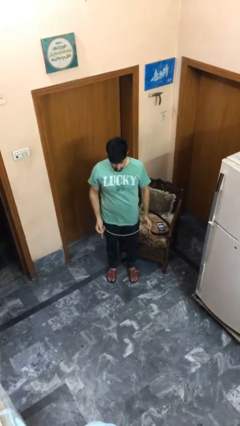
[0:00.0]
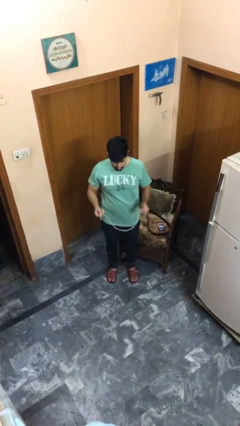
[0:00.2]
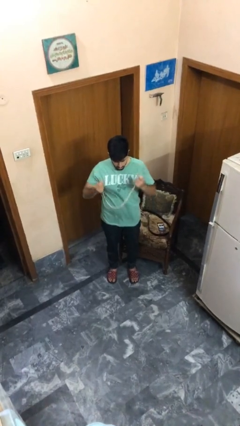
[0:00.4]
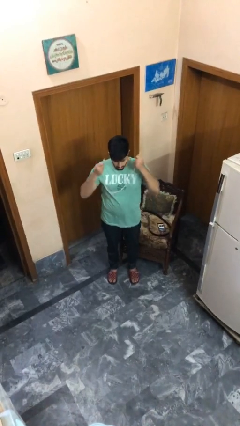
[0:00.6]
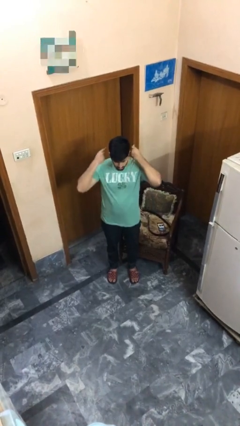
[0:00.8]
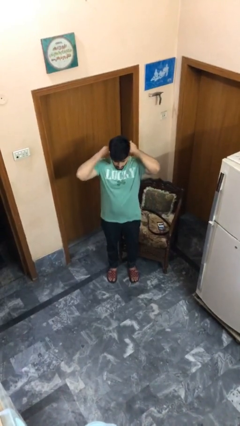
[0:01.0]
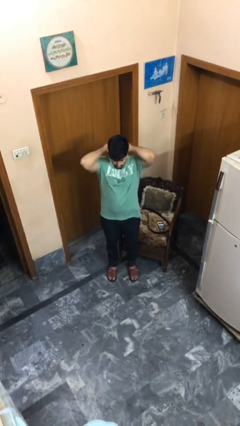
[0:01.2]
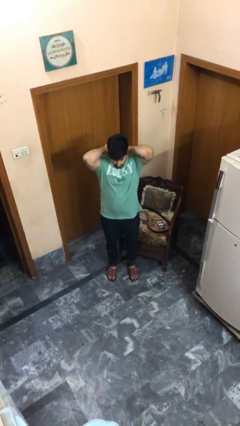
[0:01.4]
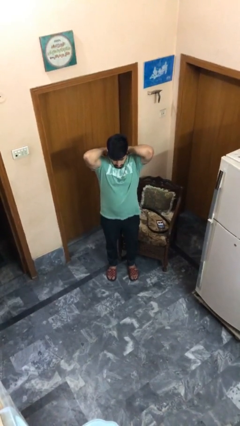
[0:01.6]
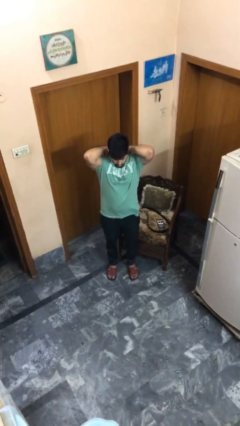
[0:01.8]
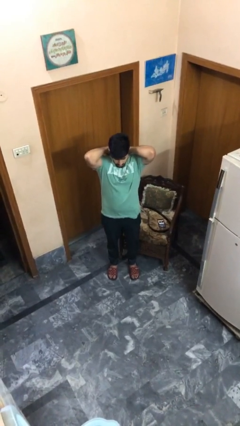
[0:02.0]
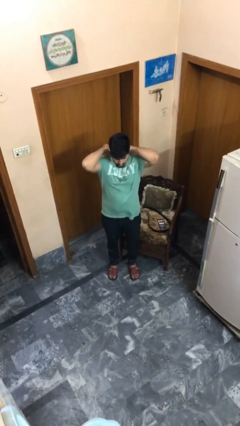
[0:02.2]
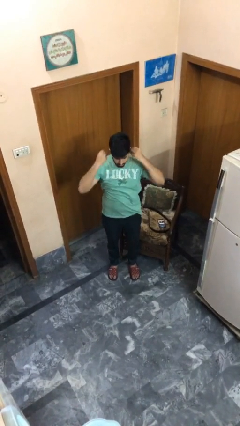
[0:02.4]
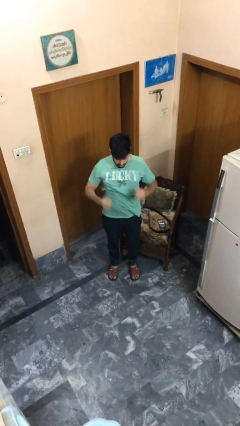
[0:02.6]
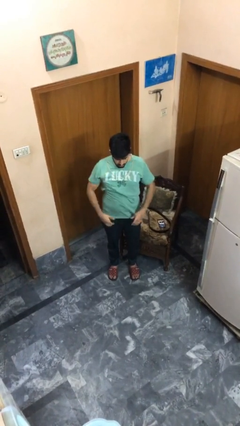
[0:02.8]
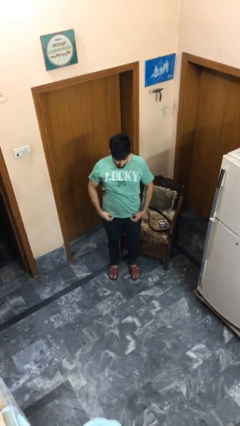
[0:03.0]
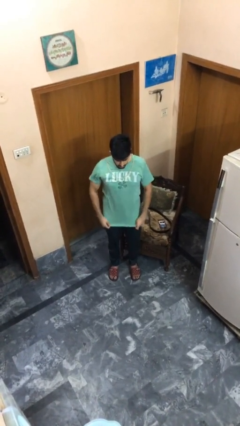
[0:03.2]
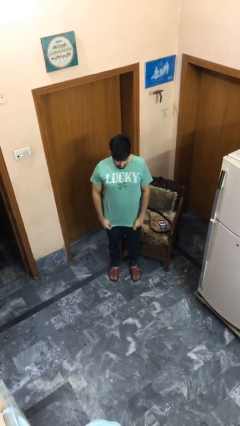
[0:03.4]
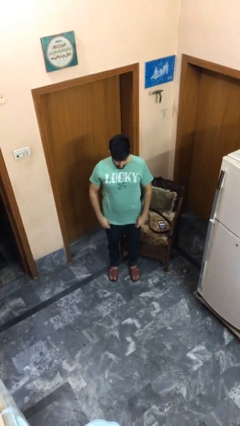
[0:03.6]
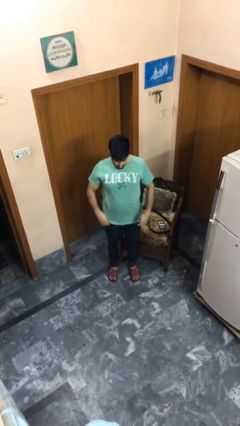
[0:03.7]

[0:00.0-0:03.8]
person puts on necklace

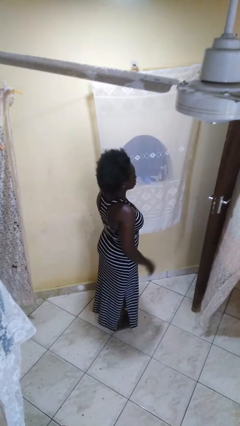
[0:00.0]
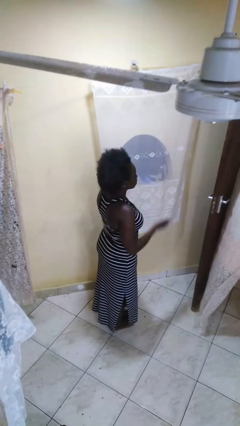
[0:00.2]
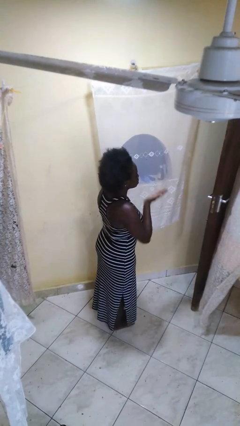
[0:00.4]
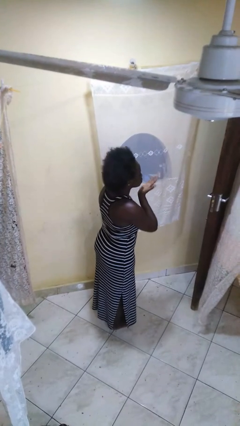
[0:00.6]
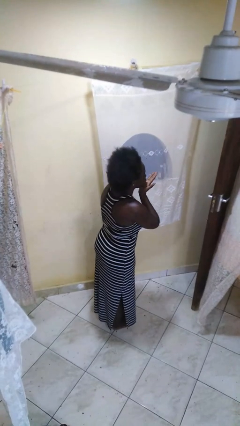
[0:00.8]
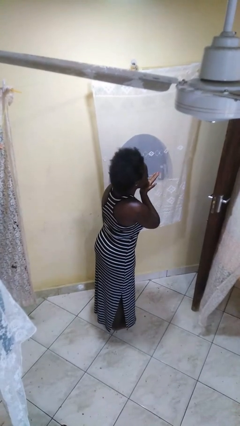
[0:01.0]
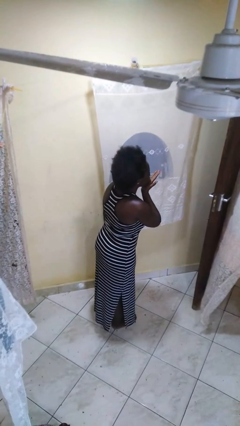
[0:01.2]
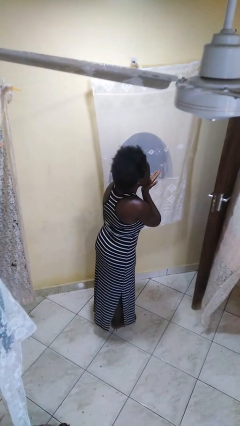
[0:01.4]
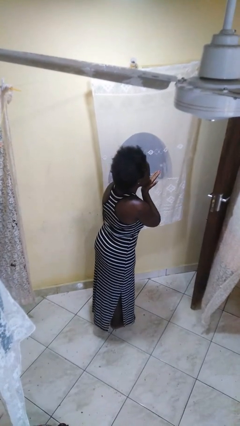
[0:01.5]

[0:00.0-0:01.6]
person gestures blow kiss

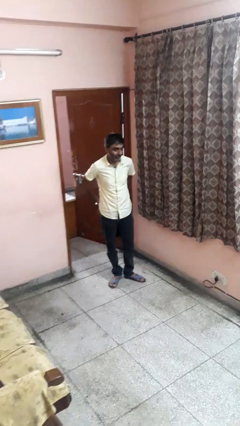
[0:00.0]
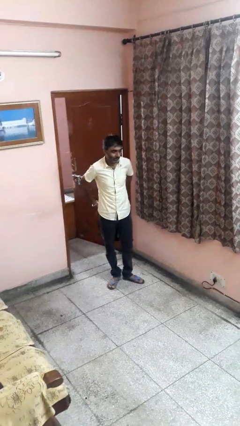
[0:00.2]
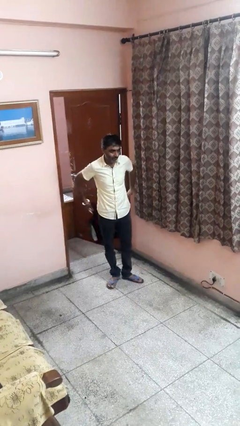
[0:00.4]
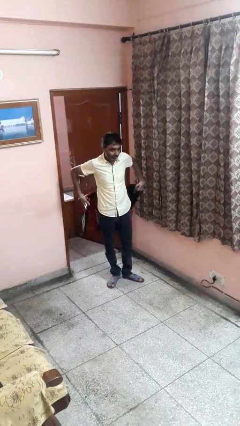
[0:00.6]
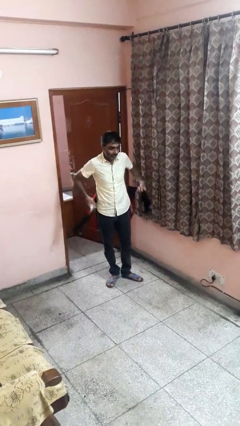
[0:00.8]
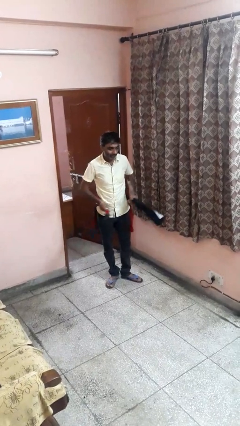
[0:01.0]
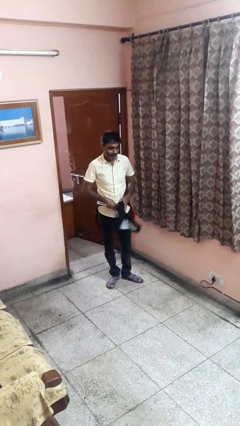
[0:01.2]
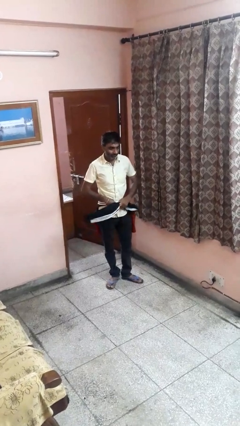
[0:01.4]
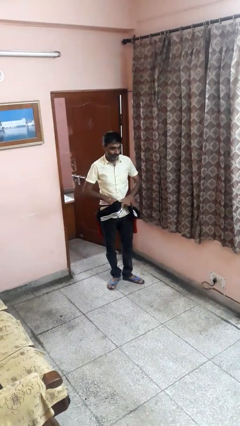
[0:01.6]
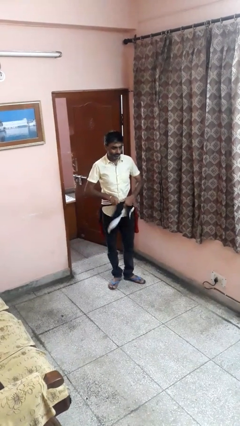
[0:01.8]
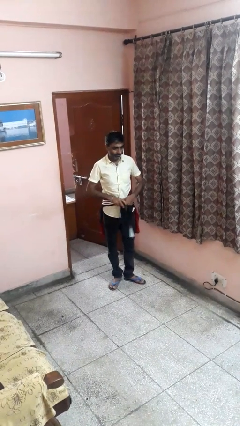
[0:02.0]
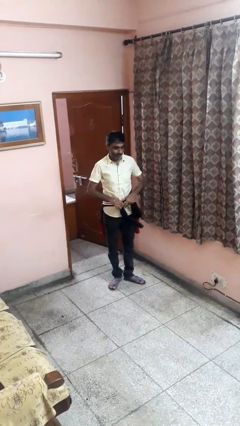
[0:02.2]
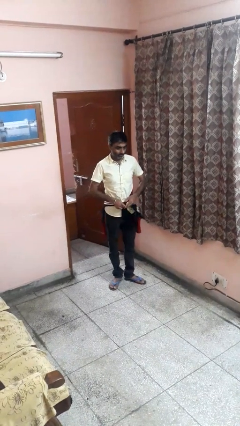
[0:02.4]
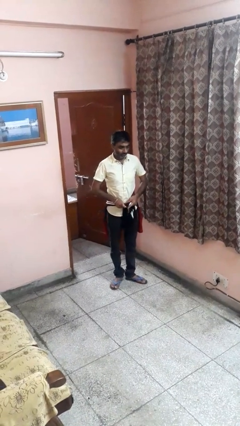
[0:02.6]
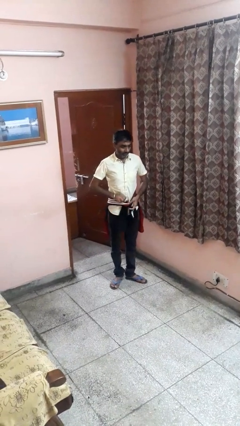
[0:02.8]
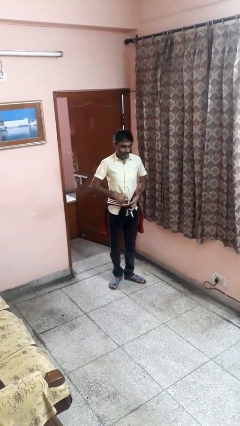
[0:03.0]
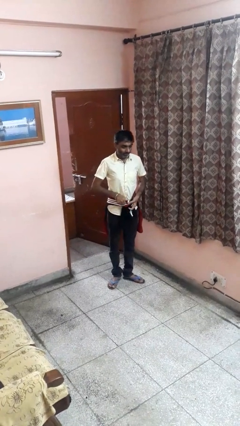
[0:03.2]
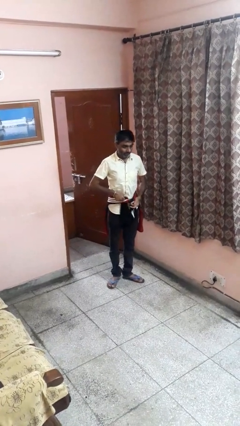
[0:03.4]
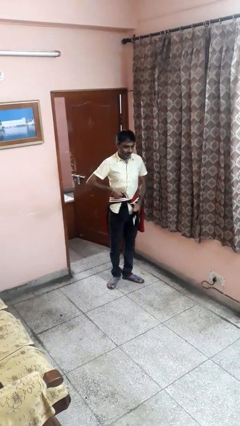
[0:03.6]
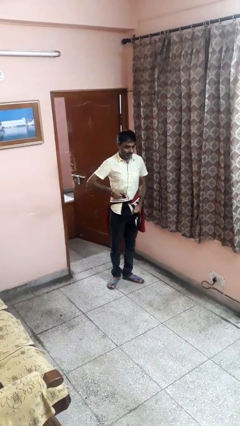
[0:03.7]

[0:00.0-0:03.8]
person ties jacket around waist

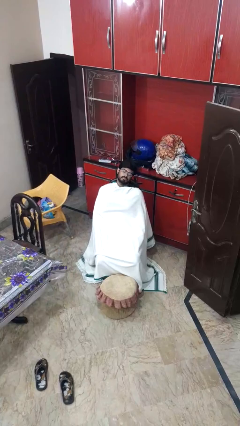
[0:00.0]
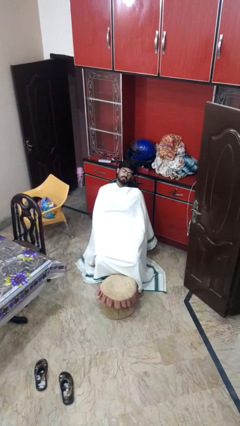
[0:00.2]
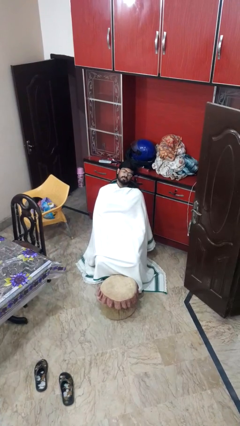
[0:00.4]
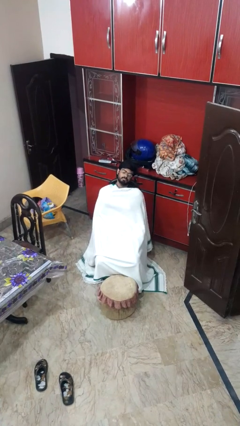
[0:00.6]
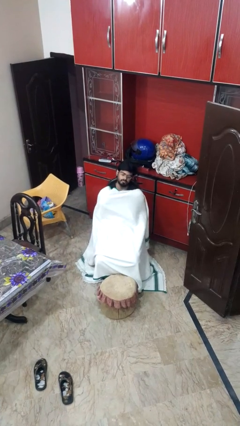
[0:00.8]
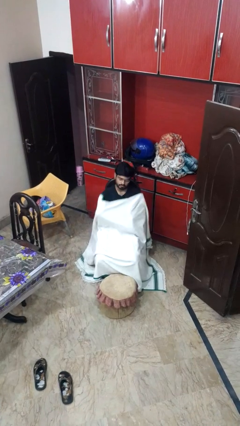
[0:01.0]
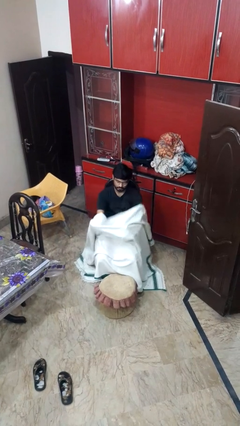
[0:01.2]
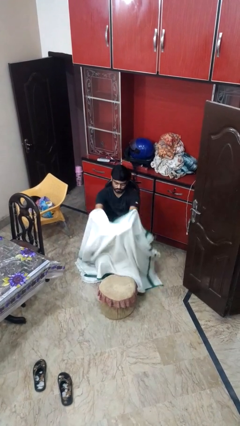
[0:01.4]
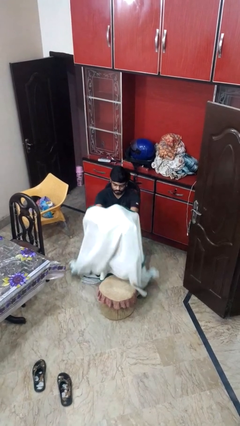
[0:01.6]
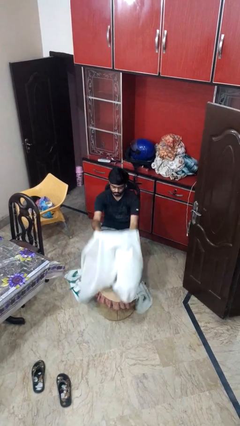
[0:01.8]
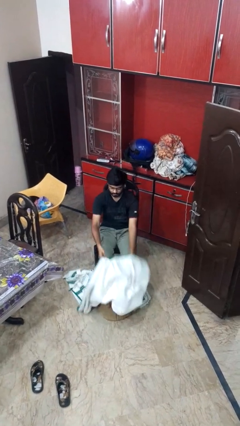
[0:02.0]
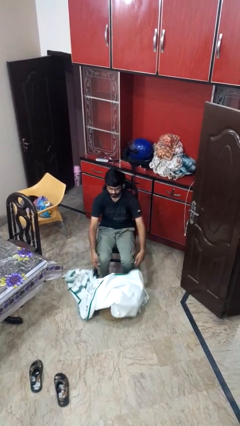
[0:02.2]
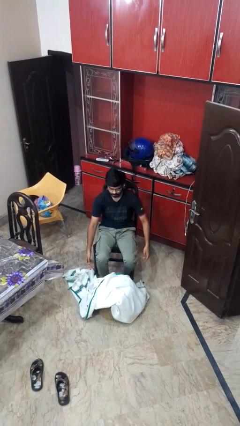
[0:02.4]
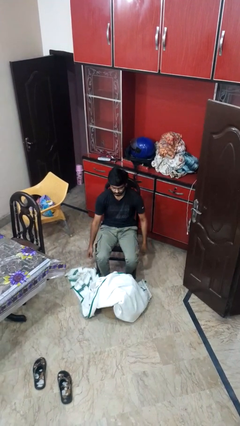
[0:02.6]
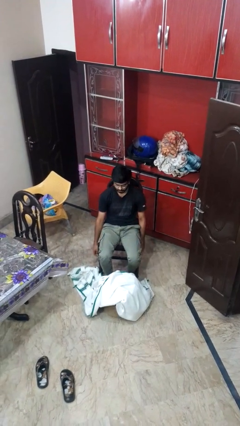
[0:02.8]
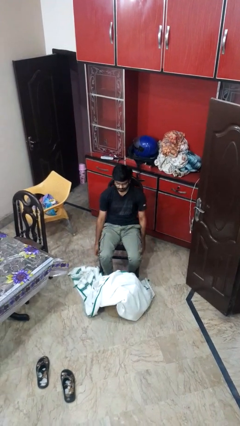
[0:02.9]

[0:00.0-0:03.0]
person uncovers with blanket

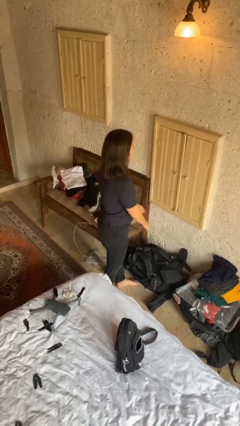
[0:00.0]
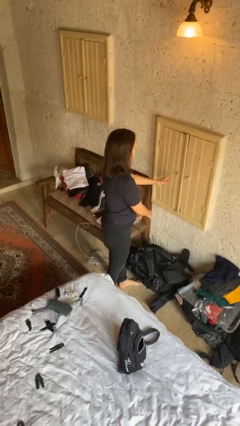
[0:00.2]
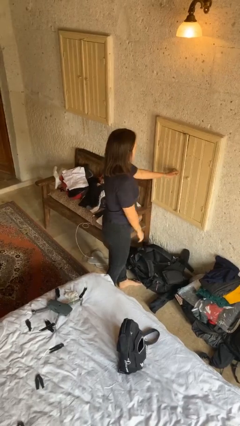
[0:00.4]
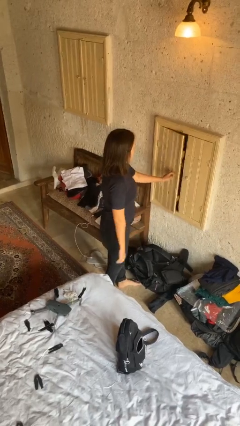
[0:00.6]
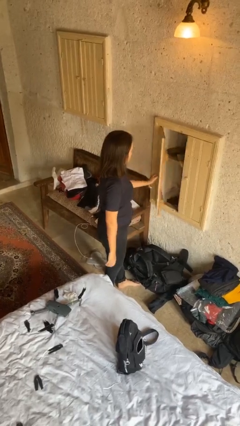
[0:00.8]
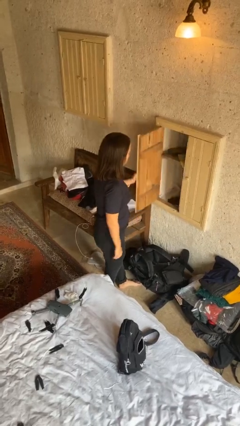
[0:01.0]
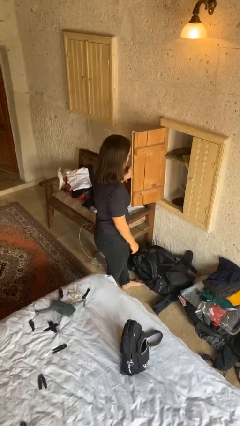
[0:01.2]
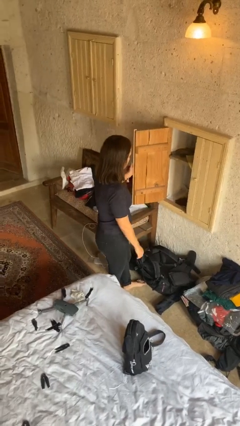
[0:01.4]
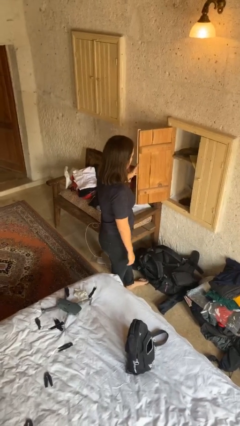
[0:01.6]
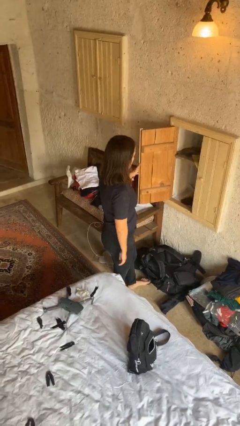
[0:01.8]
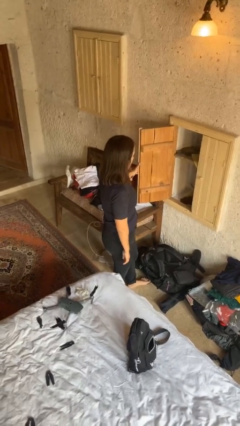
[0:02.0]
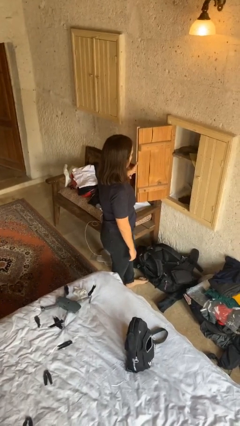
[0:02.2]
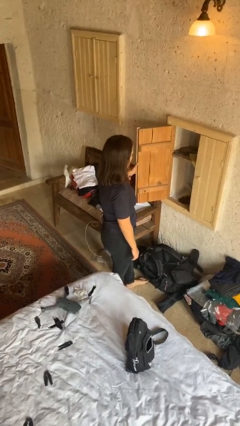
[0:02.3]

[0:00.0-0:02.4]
person opens closet door

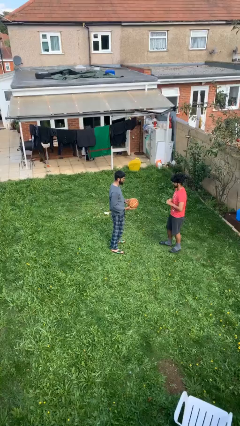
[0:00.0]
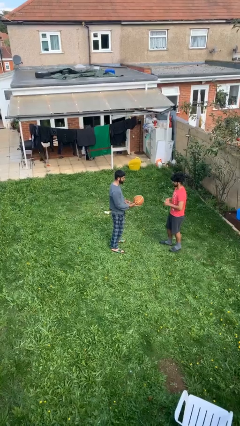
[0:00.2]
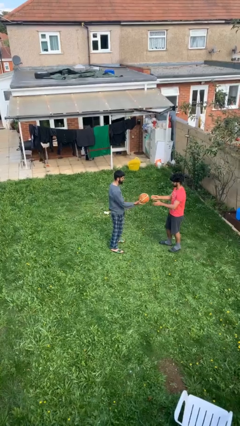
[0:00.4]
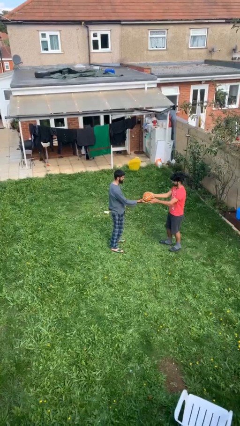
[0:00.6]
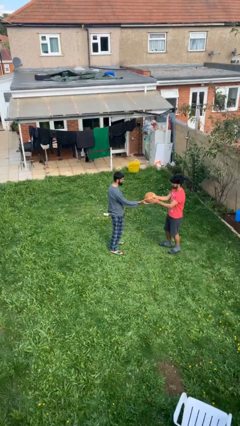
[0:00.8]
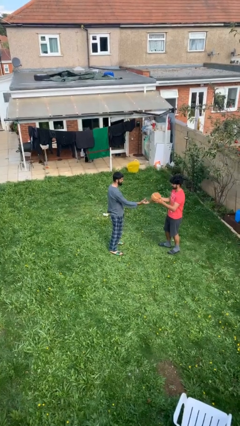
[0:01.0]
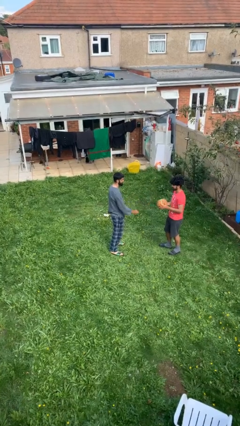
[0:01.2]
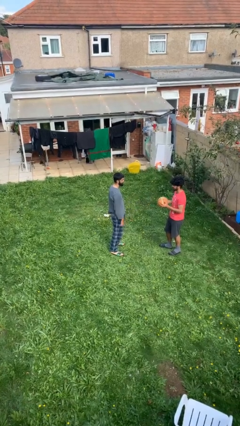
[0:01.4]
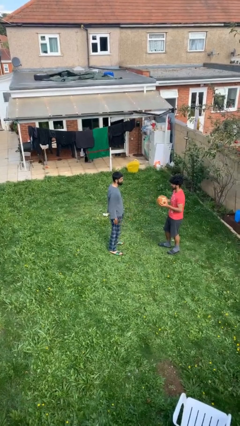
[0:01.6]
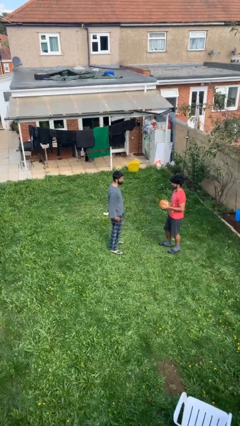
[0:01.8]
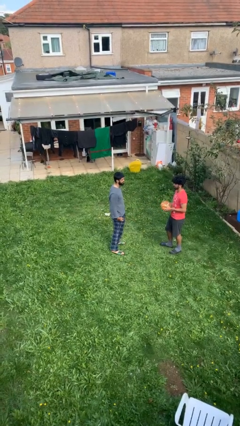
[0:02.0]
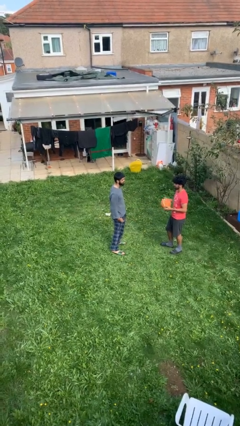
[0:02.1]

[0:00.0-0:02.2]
person transfers object to person

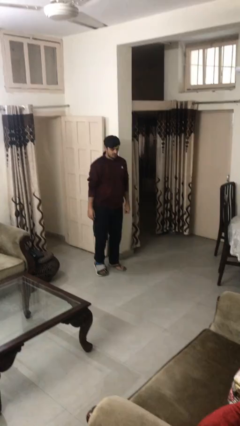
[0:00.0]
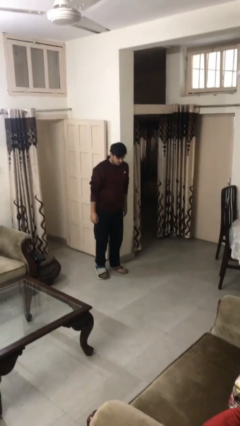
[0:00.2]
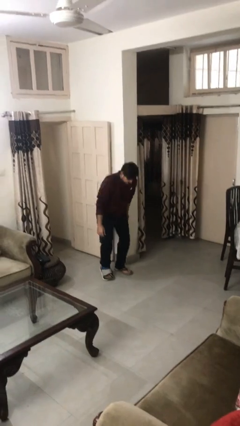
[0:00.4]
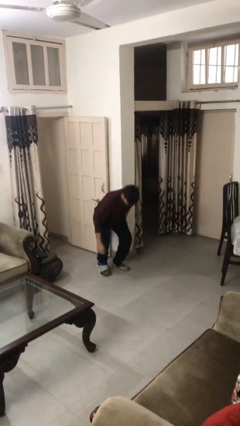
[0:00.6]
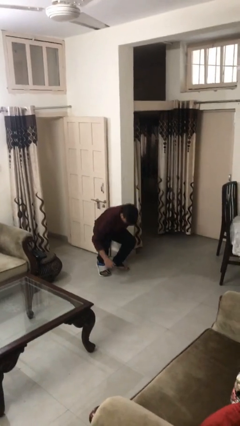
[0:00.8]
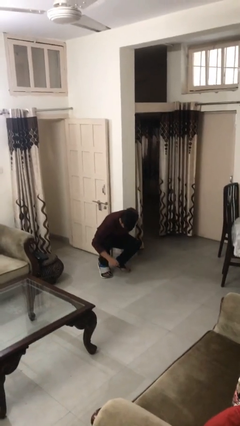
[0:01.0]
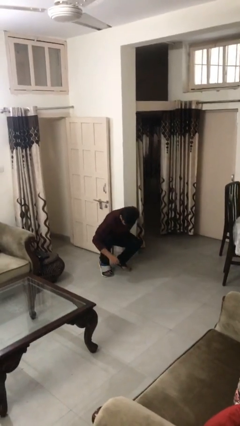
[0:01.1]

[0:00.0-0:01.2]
person sits down
